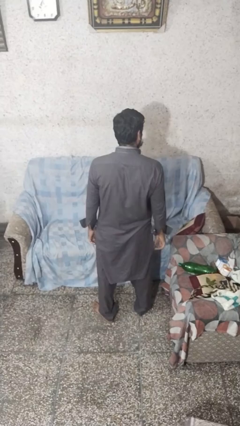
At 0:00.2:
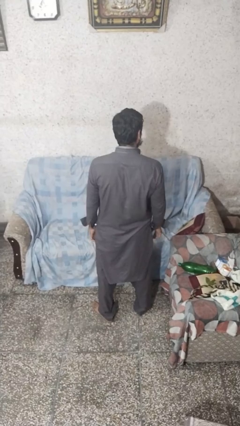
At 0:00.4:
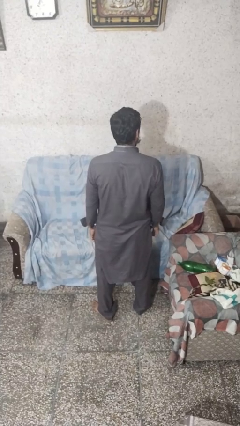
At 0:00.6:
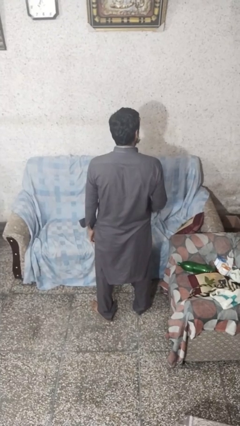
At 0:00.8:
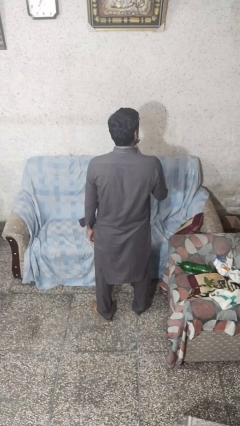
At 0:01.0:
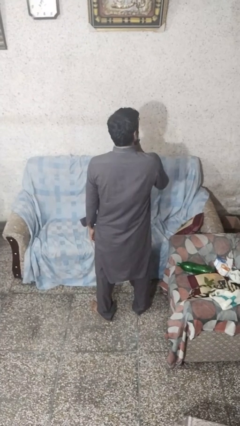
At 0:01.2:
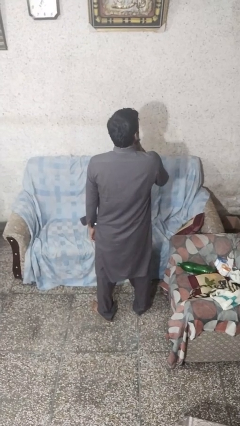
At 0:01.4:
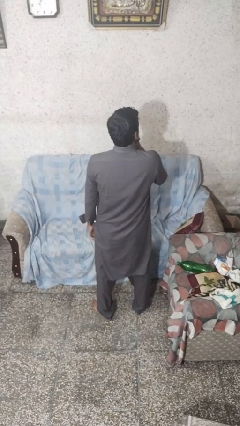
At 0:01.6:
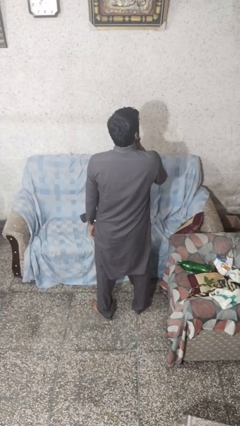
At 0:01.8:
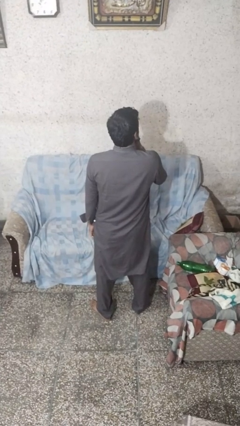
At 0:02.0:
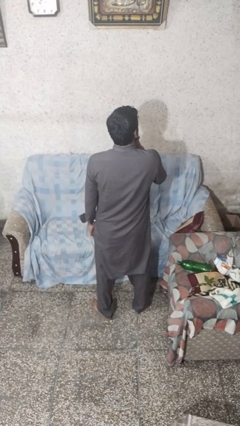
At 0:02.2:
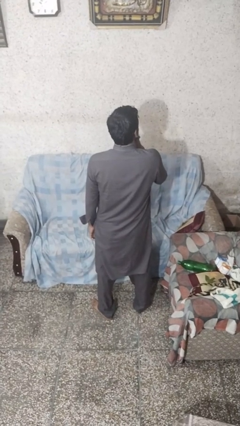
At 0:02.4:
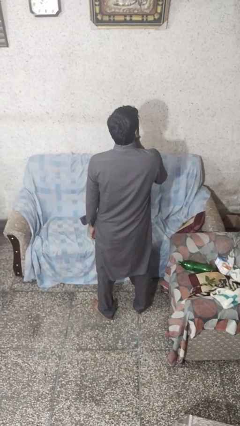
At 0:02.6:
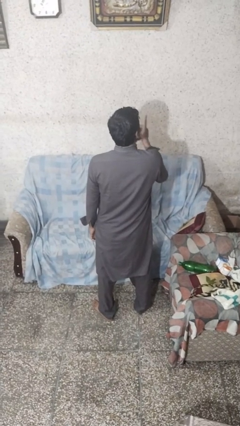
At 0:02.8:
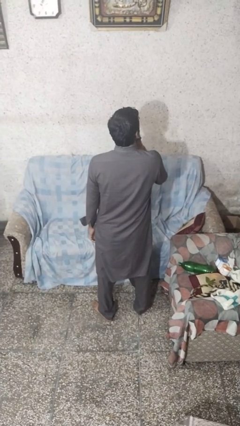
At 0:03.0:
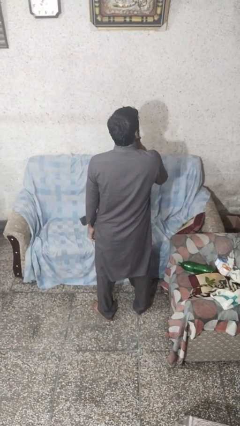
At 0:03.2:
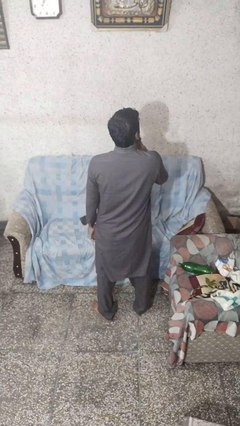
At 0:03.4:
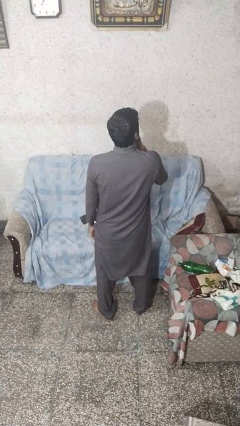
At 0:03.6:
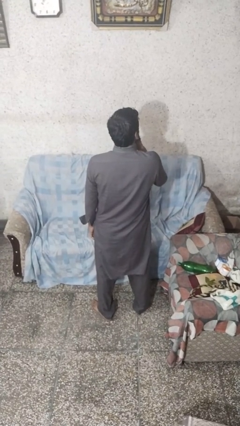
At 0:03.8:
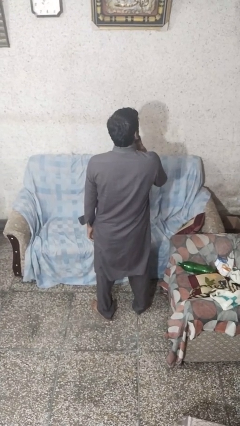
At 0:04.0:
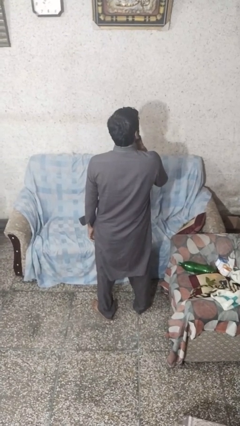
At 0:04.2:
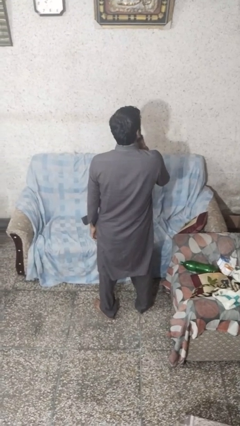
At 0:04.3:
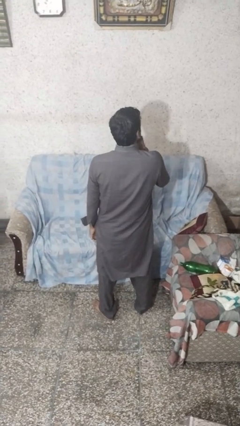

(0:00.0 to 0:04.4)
person gestures be quiet

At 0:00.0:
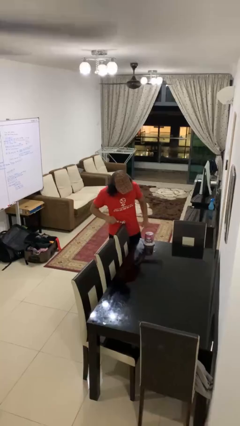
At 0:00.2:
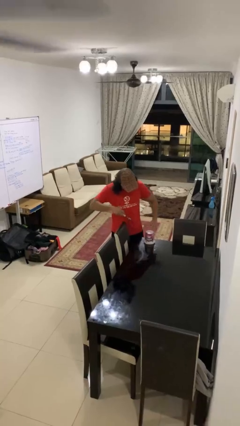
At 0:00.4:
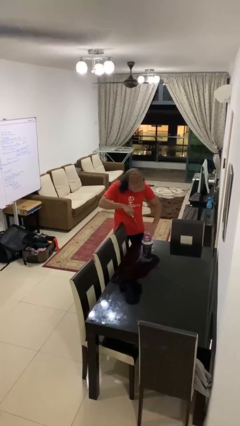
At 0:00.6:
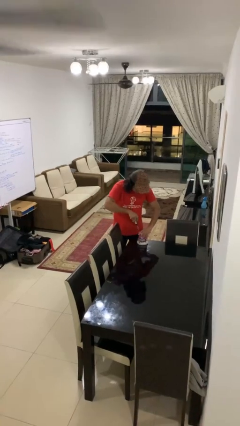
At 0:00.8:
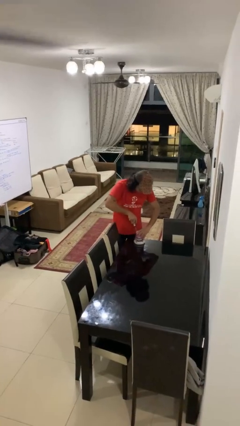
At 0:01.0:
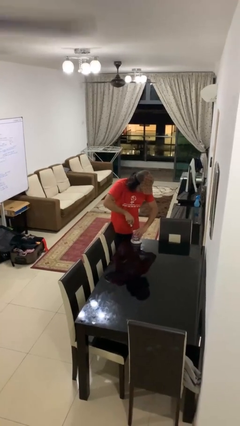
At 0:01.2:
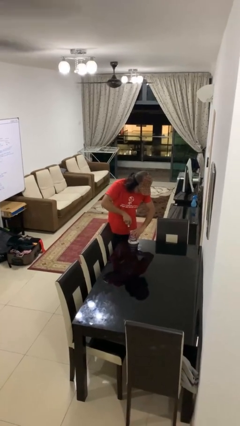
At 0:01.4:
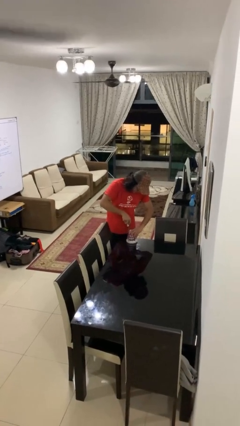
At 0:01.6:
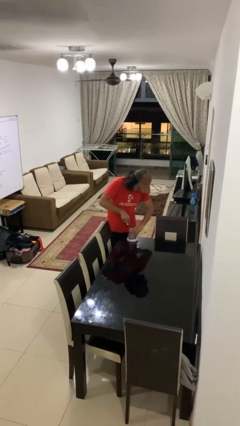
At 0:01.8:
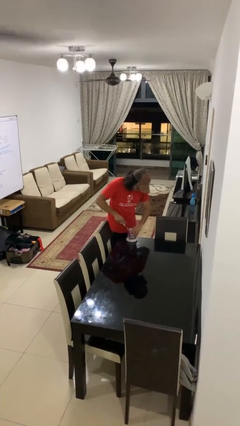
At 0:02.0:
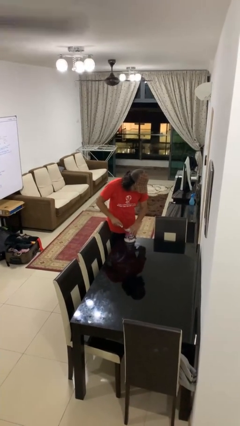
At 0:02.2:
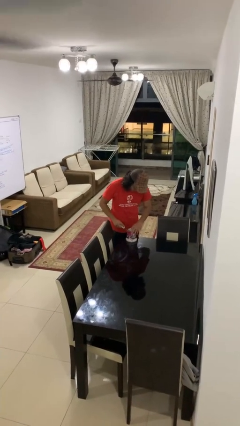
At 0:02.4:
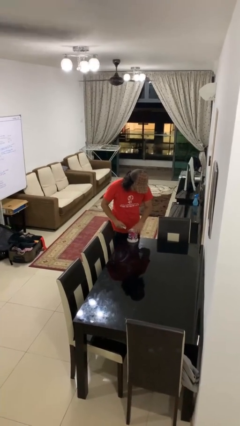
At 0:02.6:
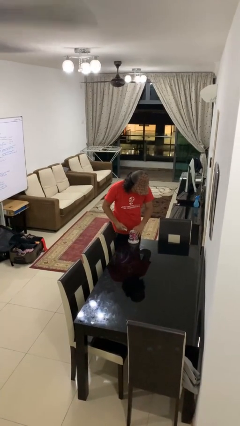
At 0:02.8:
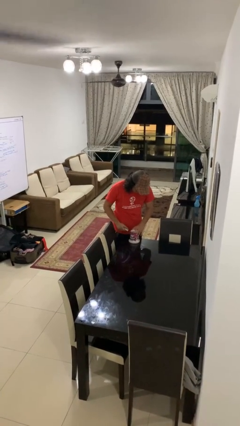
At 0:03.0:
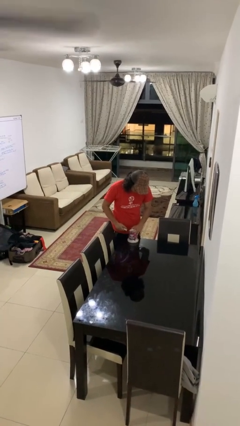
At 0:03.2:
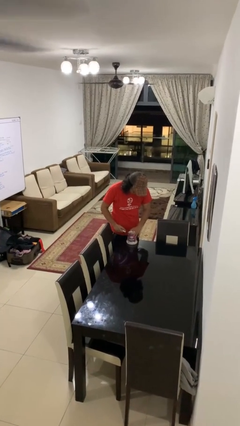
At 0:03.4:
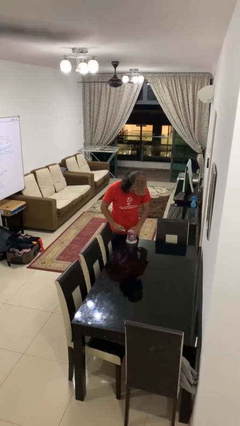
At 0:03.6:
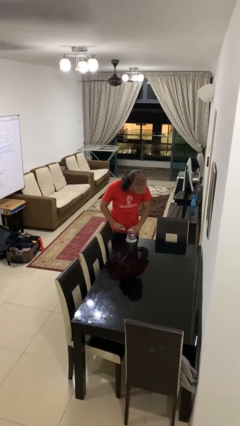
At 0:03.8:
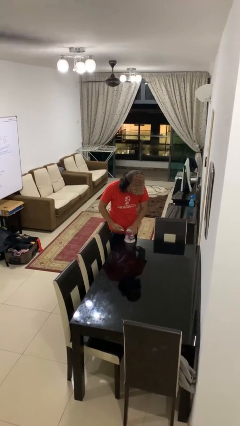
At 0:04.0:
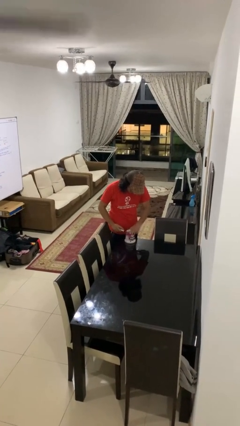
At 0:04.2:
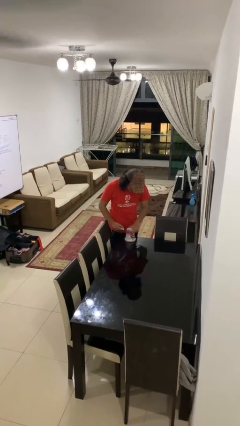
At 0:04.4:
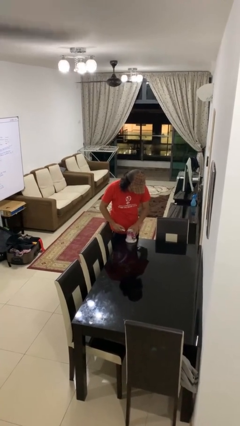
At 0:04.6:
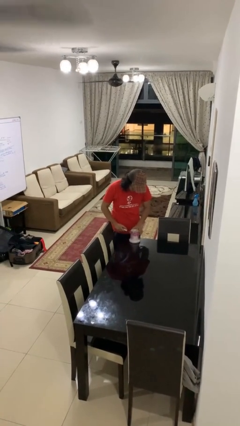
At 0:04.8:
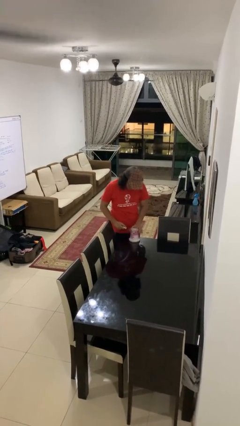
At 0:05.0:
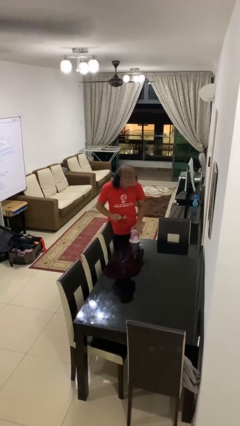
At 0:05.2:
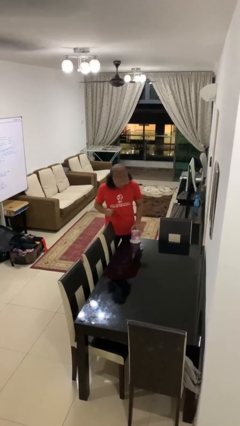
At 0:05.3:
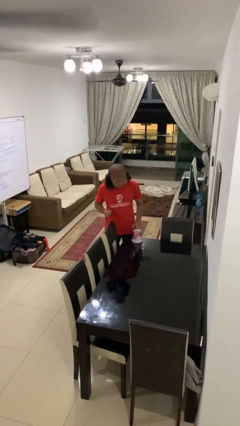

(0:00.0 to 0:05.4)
person opens can with can opener

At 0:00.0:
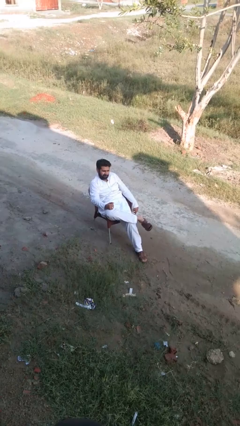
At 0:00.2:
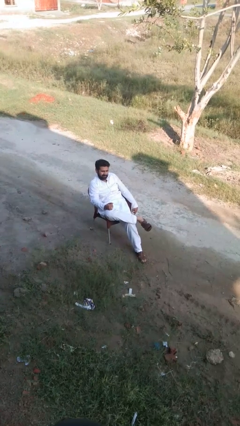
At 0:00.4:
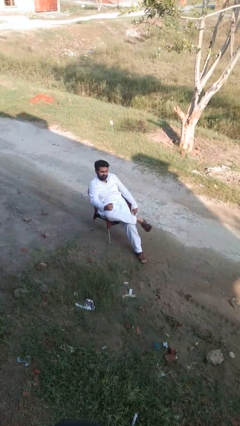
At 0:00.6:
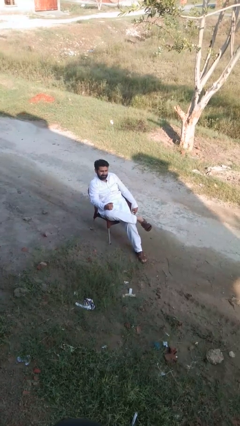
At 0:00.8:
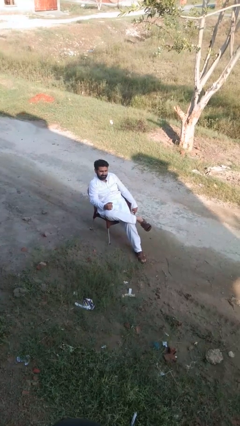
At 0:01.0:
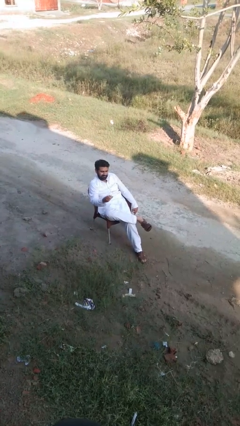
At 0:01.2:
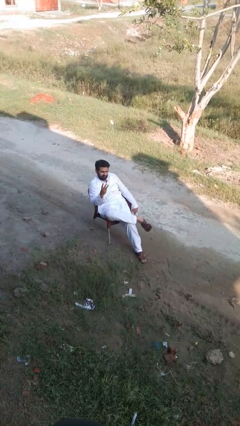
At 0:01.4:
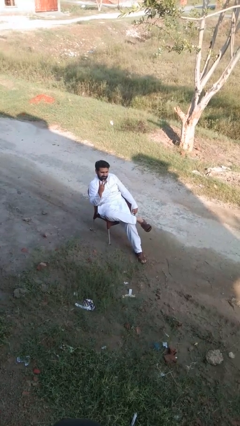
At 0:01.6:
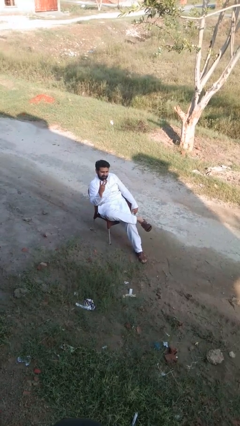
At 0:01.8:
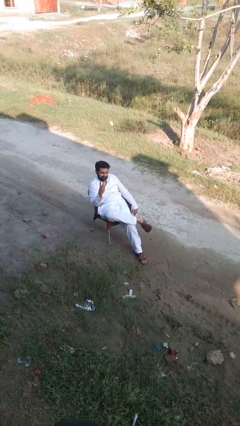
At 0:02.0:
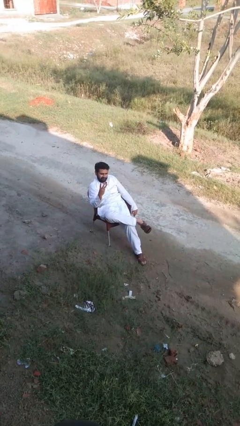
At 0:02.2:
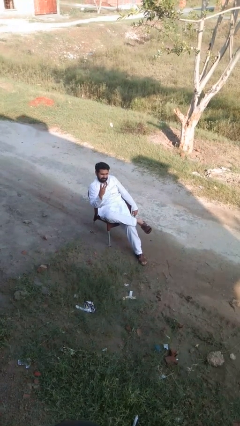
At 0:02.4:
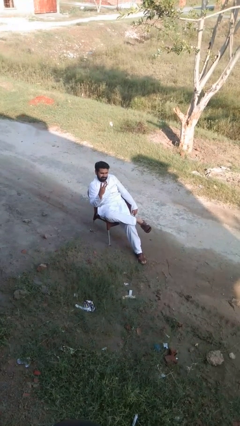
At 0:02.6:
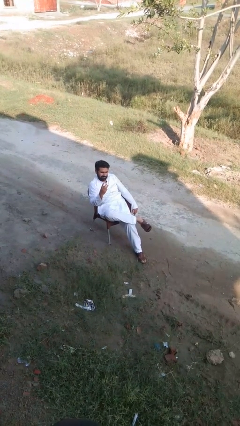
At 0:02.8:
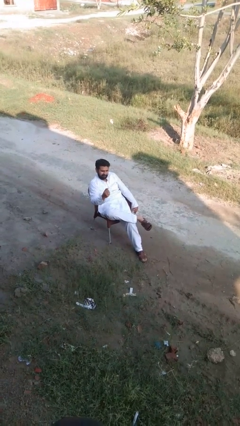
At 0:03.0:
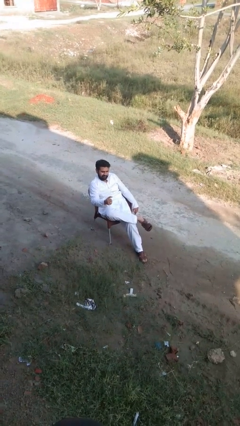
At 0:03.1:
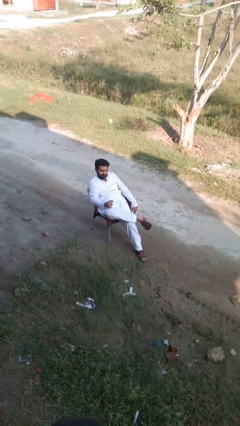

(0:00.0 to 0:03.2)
person gestures number three

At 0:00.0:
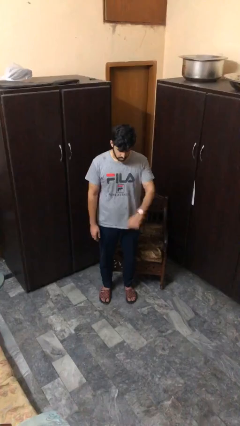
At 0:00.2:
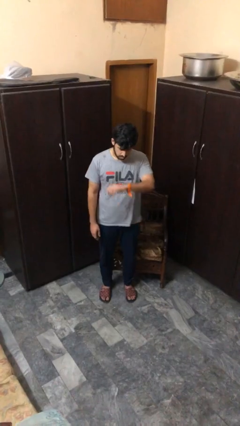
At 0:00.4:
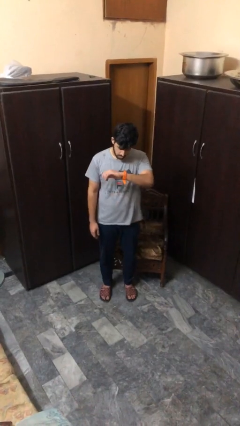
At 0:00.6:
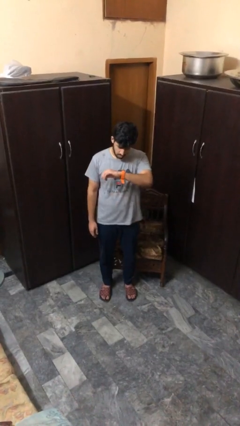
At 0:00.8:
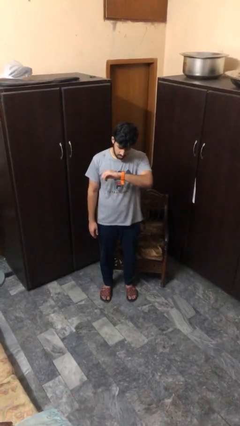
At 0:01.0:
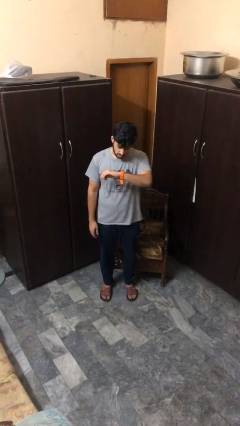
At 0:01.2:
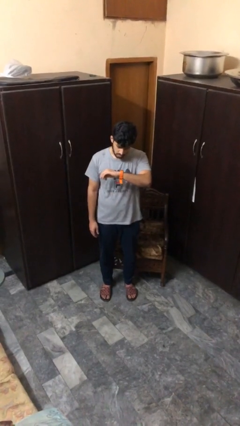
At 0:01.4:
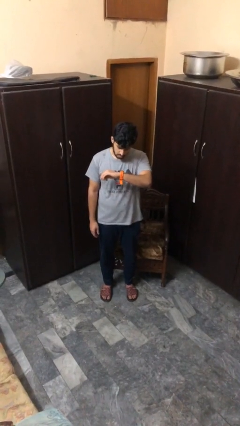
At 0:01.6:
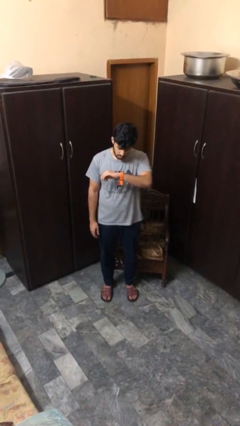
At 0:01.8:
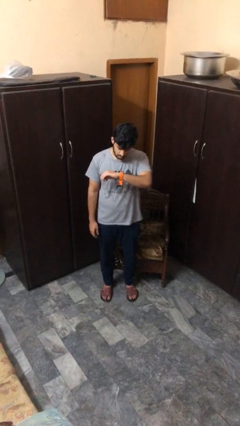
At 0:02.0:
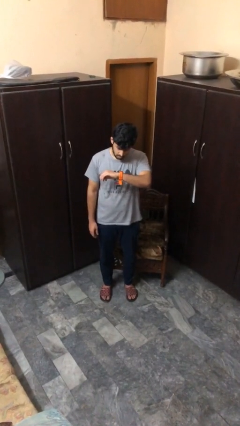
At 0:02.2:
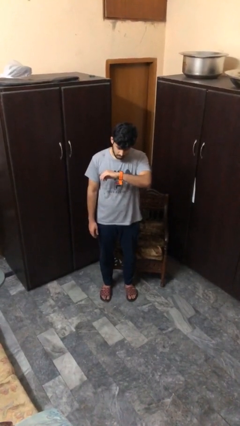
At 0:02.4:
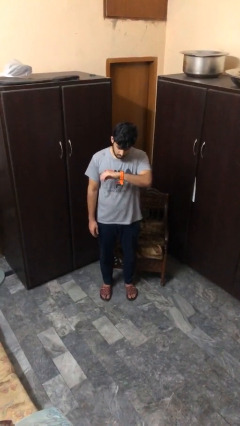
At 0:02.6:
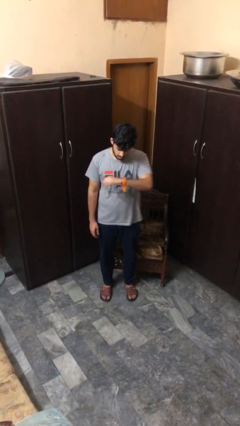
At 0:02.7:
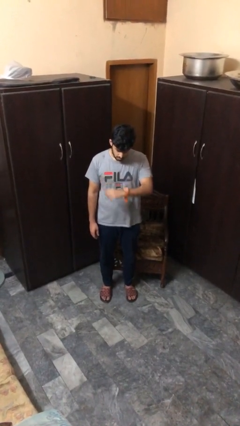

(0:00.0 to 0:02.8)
person looks at wristwatch

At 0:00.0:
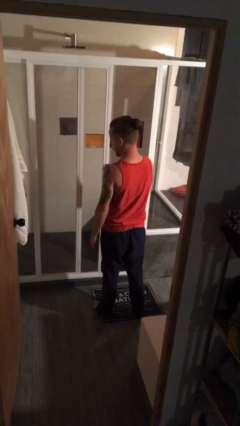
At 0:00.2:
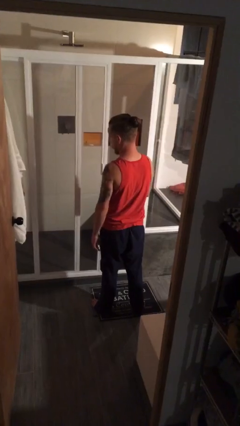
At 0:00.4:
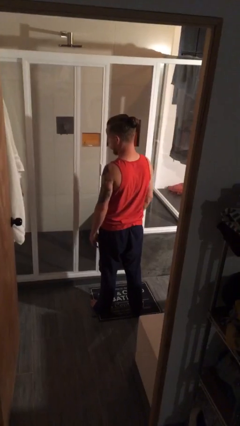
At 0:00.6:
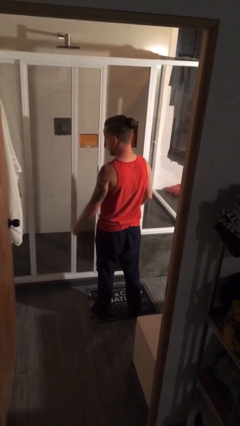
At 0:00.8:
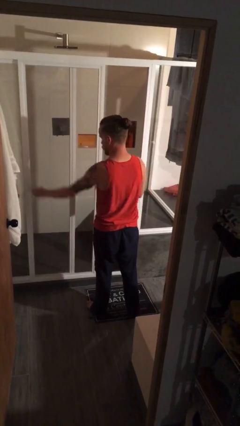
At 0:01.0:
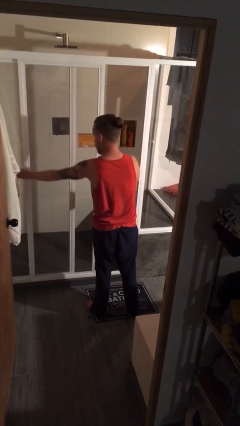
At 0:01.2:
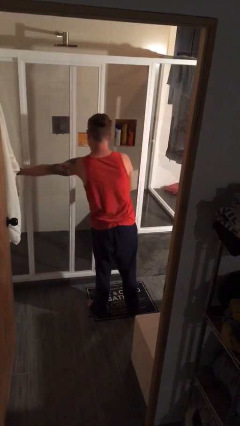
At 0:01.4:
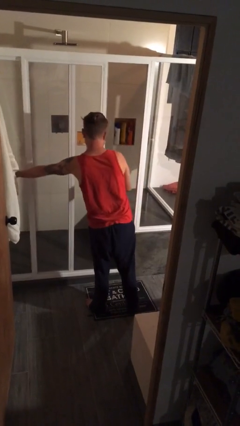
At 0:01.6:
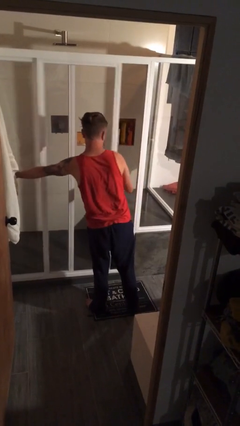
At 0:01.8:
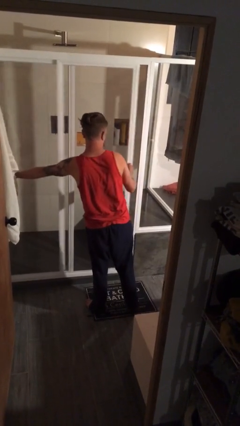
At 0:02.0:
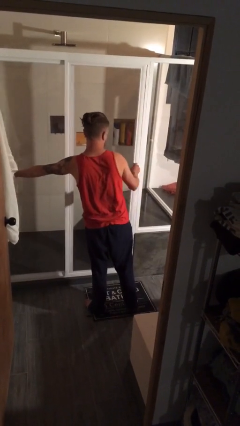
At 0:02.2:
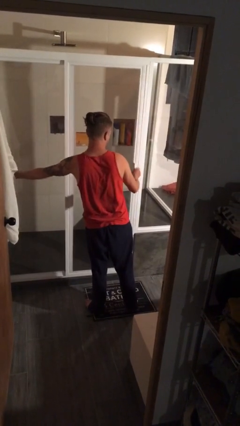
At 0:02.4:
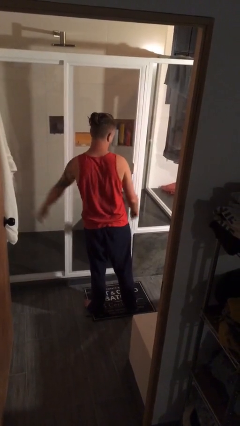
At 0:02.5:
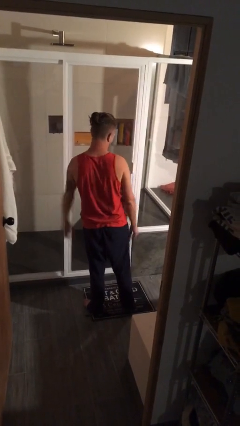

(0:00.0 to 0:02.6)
person closes sliding door
